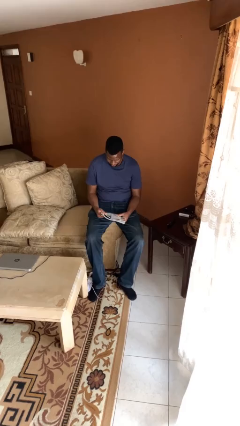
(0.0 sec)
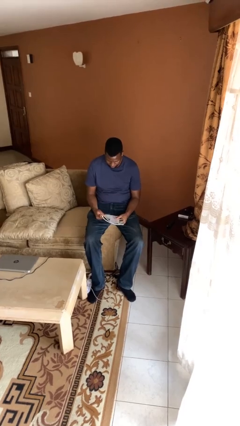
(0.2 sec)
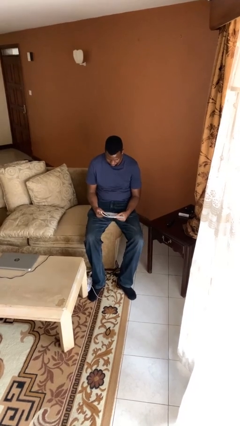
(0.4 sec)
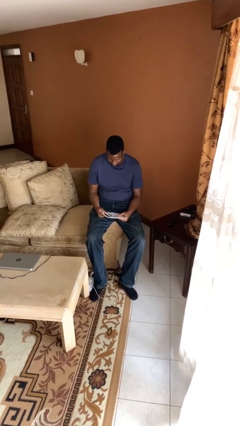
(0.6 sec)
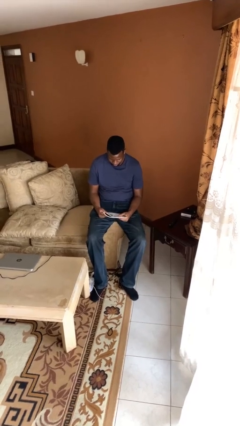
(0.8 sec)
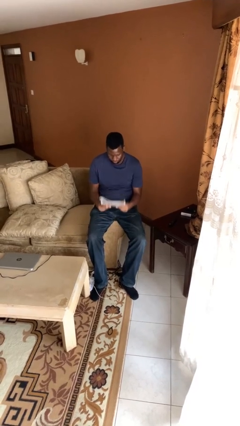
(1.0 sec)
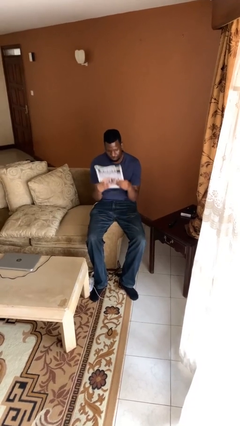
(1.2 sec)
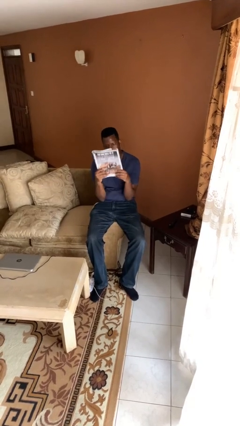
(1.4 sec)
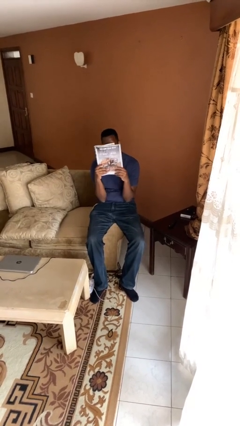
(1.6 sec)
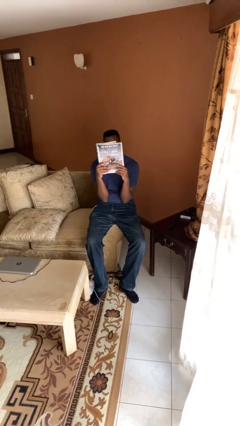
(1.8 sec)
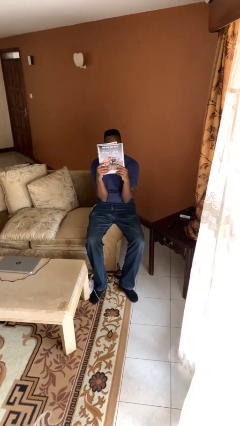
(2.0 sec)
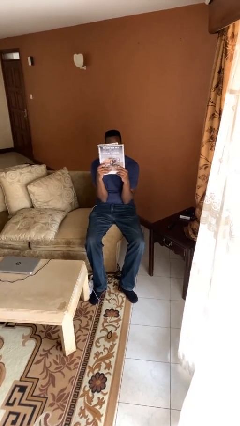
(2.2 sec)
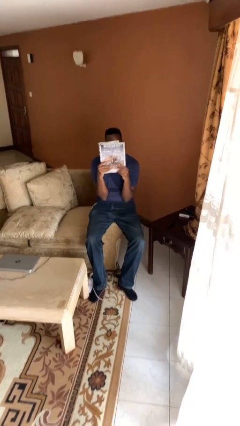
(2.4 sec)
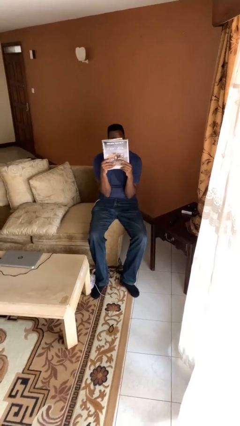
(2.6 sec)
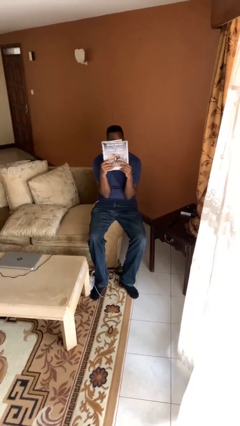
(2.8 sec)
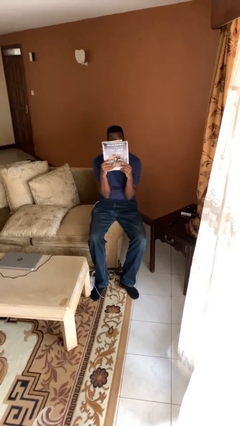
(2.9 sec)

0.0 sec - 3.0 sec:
person reads document

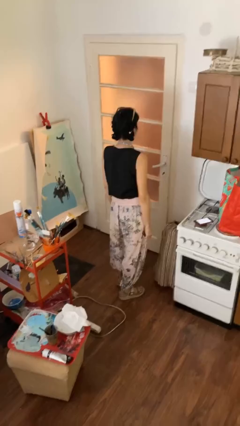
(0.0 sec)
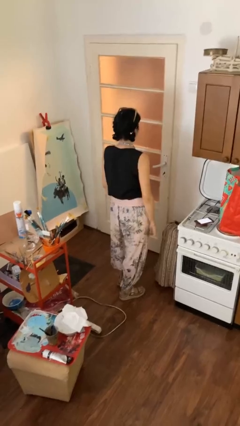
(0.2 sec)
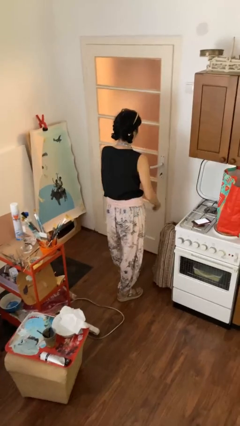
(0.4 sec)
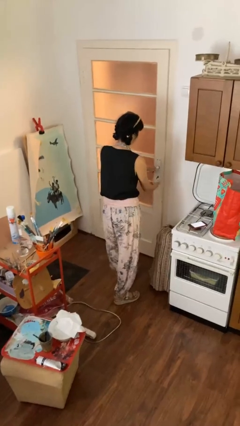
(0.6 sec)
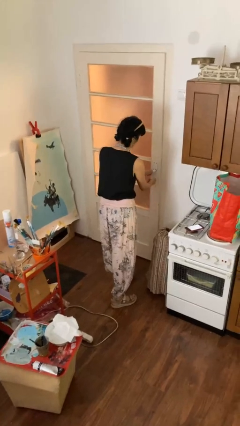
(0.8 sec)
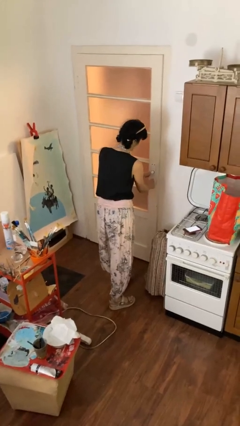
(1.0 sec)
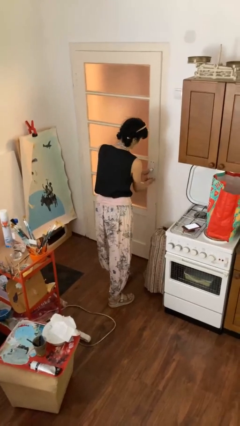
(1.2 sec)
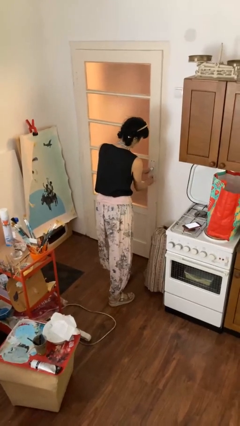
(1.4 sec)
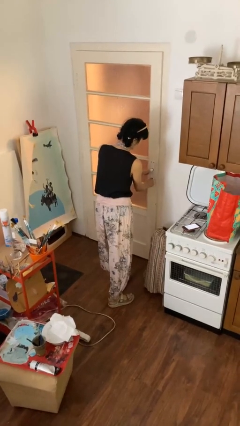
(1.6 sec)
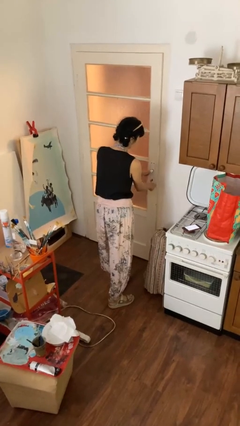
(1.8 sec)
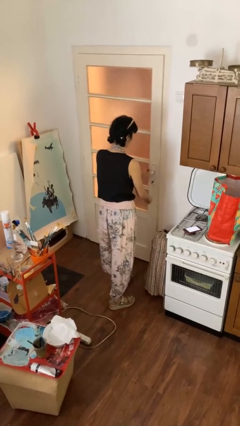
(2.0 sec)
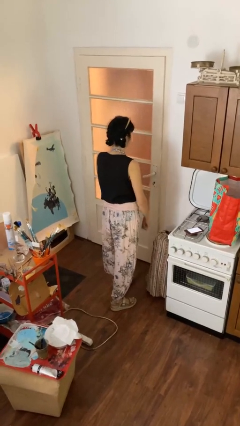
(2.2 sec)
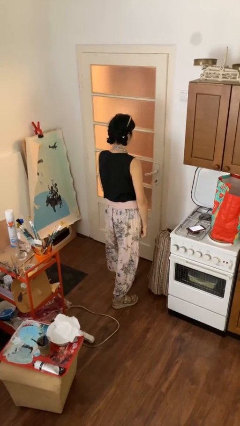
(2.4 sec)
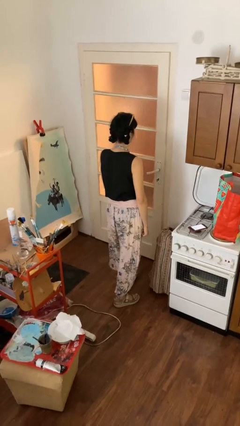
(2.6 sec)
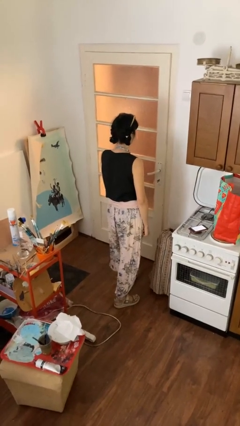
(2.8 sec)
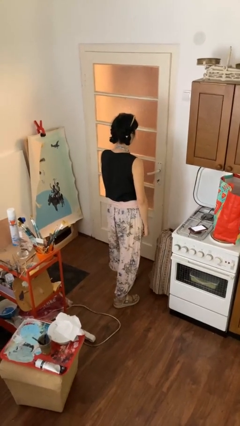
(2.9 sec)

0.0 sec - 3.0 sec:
person unlocks door with keys

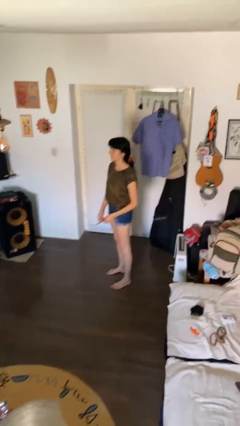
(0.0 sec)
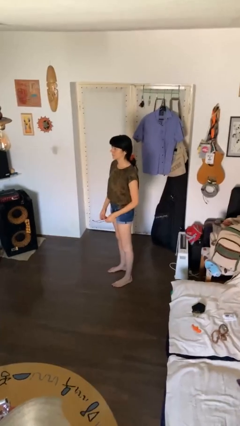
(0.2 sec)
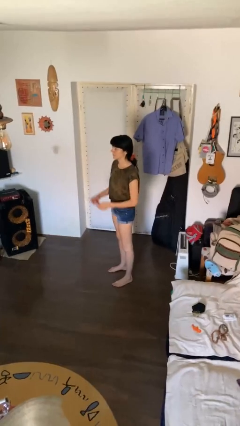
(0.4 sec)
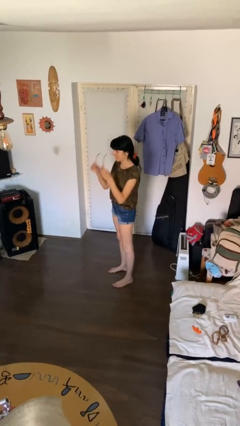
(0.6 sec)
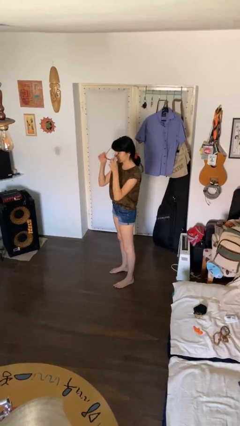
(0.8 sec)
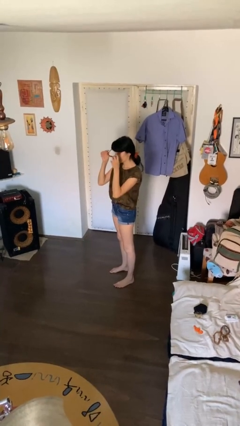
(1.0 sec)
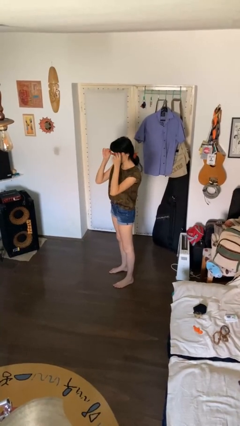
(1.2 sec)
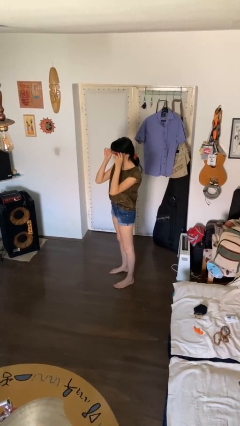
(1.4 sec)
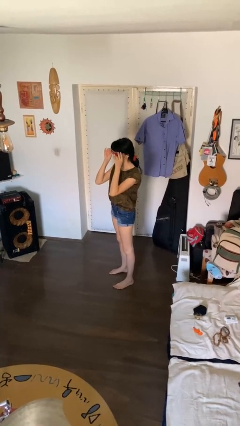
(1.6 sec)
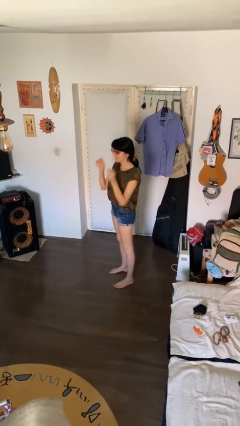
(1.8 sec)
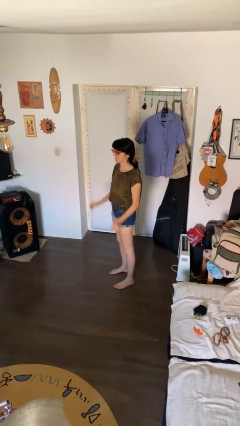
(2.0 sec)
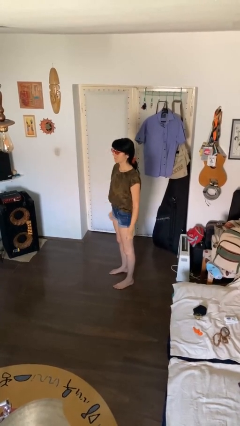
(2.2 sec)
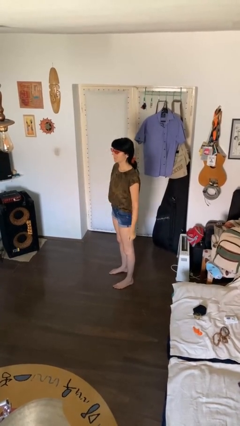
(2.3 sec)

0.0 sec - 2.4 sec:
person puts on sunglasses

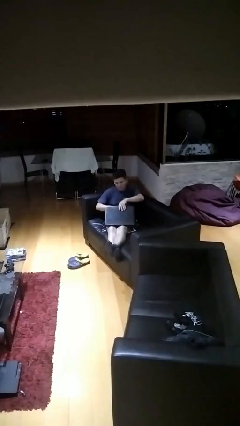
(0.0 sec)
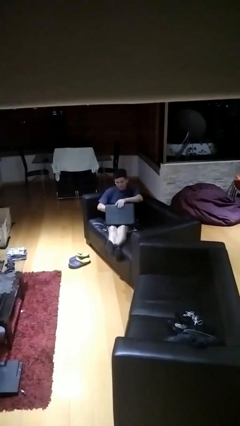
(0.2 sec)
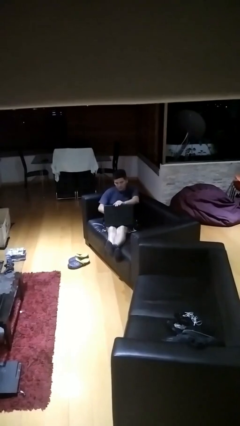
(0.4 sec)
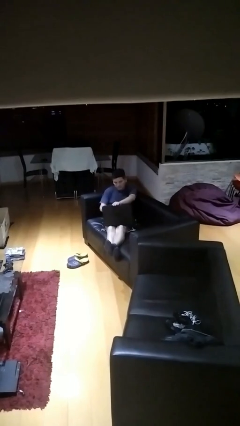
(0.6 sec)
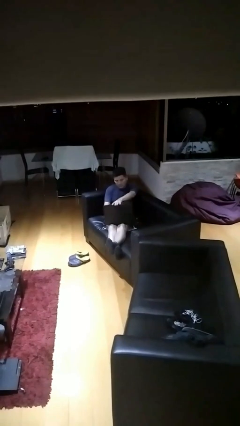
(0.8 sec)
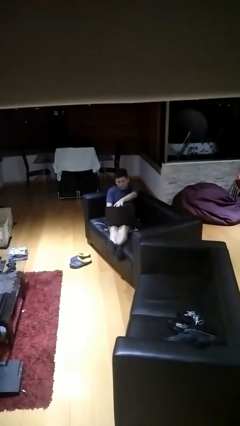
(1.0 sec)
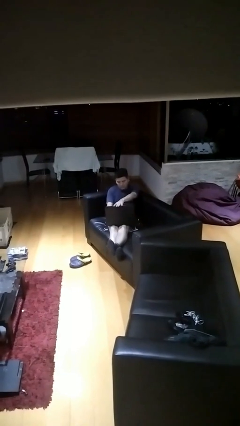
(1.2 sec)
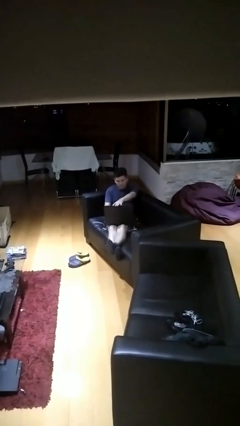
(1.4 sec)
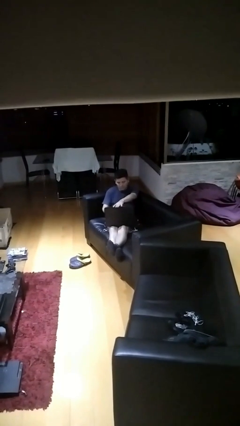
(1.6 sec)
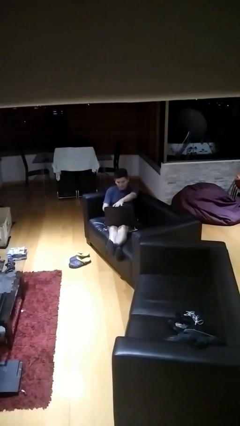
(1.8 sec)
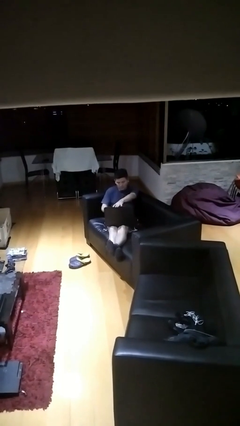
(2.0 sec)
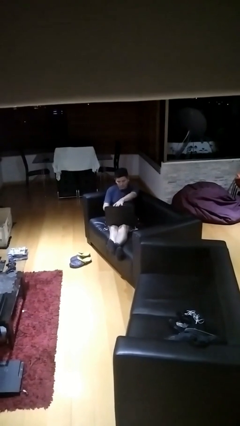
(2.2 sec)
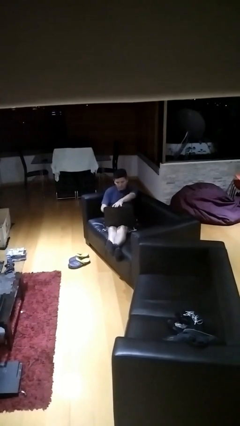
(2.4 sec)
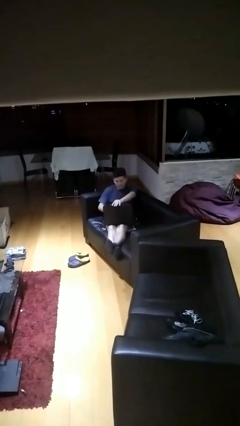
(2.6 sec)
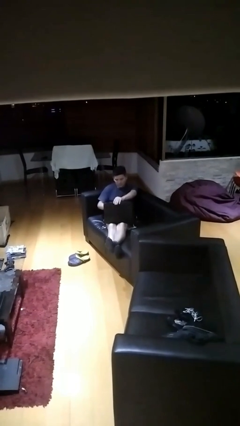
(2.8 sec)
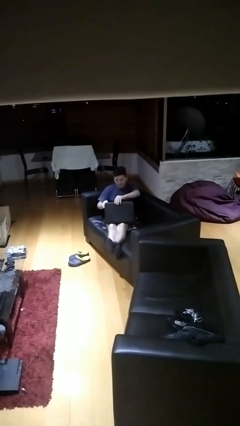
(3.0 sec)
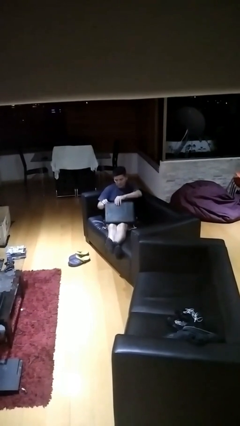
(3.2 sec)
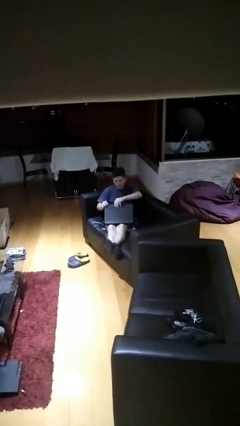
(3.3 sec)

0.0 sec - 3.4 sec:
person interacts with laptop

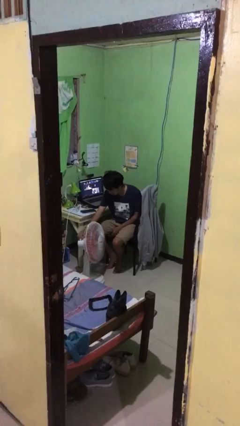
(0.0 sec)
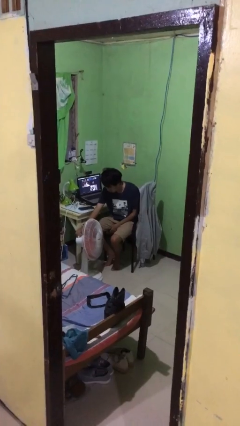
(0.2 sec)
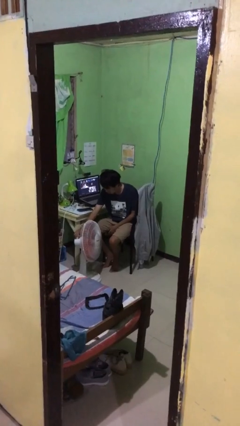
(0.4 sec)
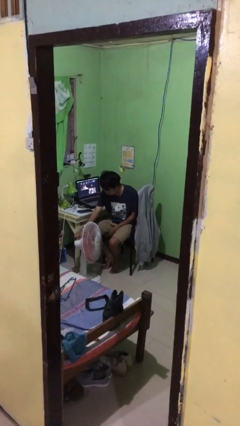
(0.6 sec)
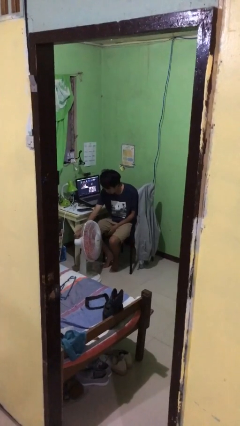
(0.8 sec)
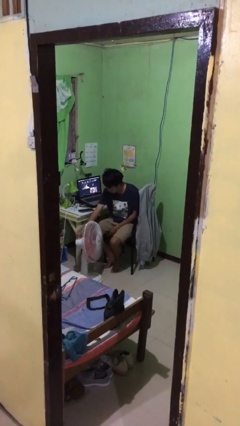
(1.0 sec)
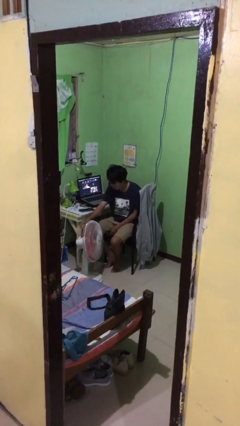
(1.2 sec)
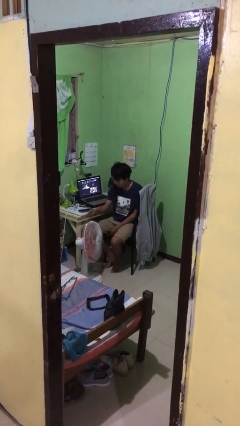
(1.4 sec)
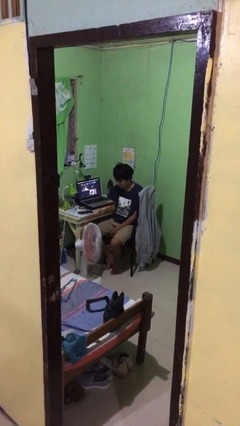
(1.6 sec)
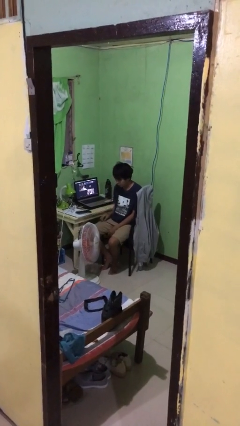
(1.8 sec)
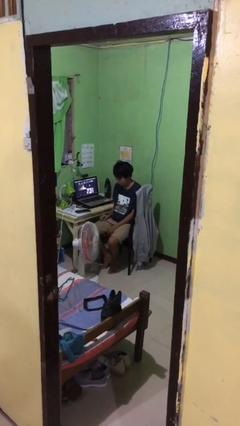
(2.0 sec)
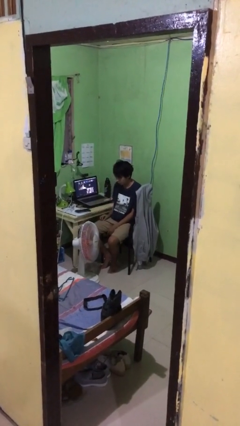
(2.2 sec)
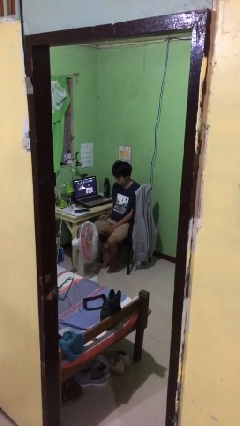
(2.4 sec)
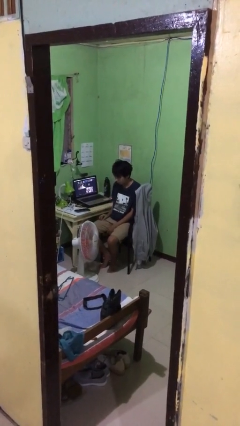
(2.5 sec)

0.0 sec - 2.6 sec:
person turns off fan

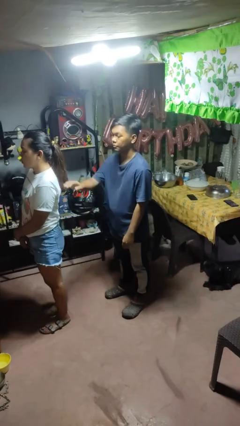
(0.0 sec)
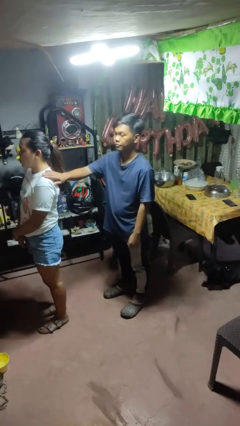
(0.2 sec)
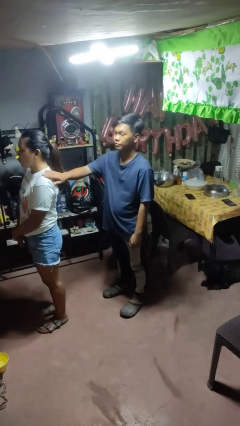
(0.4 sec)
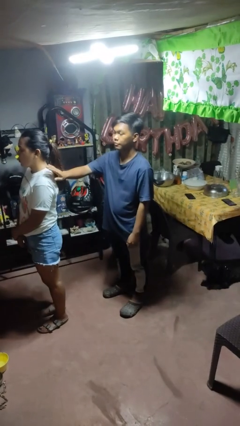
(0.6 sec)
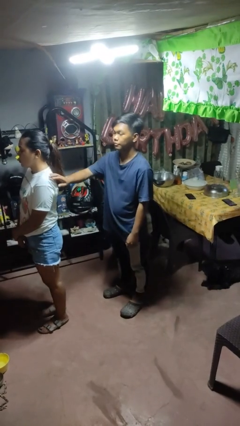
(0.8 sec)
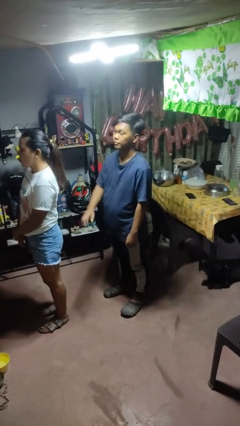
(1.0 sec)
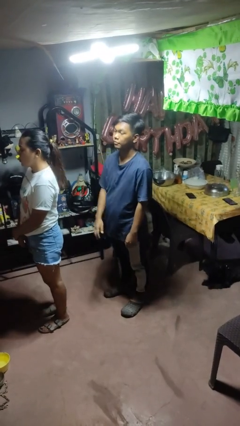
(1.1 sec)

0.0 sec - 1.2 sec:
person pounds shoulders of person

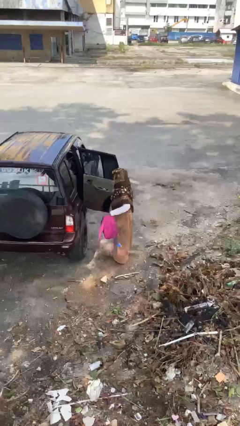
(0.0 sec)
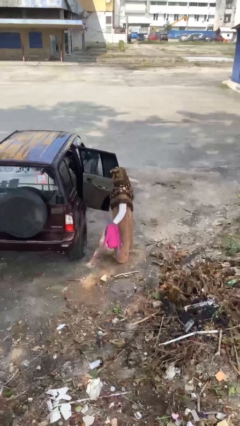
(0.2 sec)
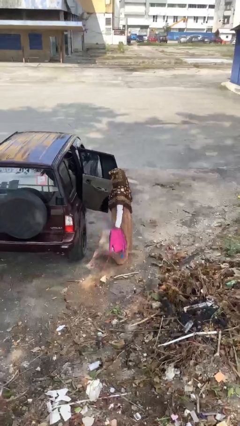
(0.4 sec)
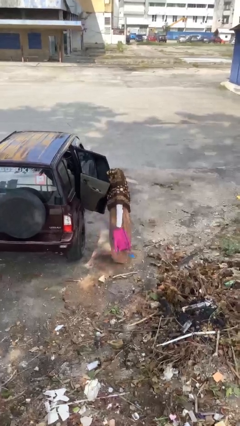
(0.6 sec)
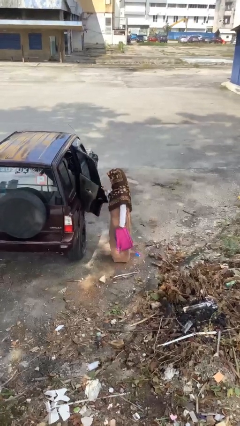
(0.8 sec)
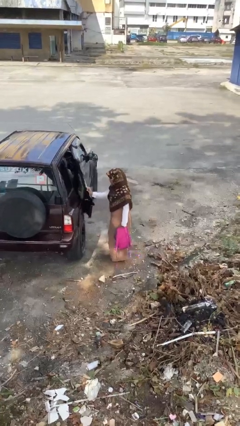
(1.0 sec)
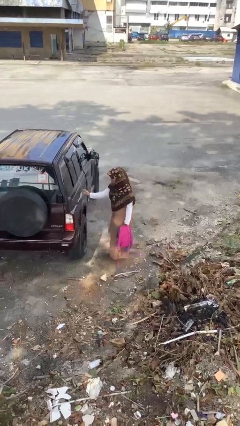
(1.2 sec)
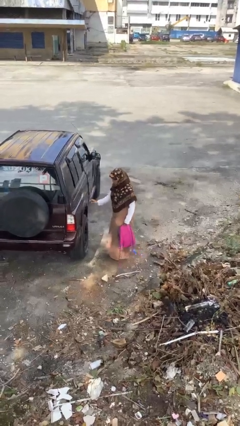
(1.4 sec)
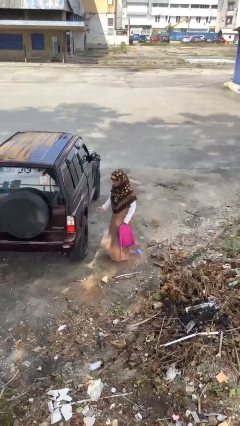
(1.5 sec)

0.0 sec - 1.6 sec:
person closes car door
